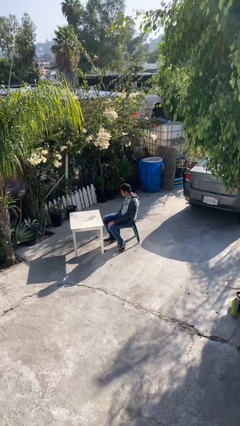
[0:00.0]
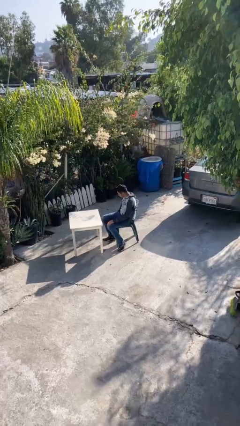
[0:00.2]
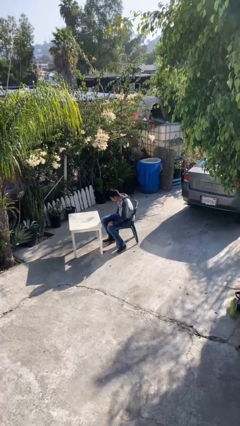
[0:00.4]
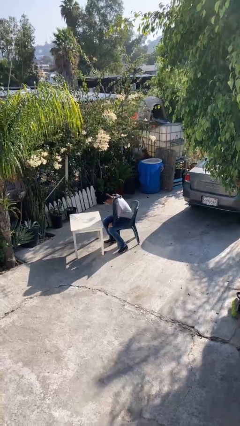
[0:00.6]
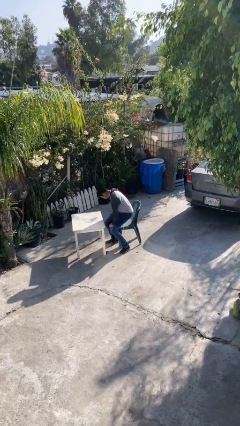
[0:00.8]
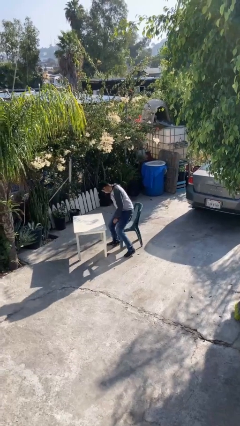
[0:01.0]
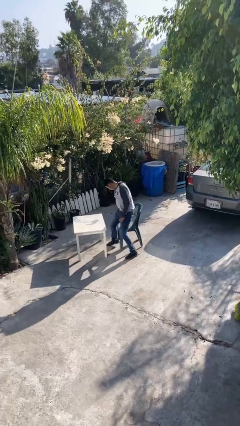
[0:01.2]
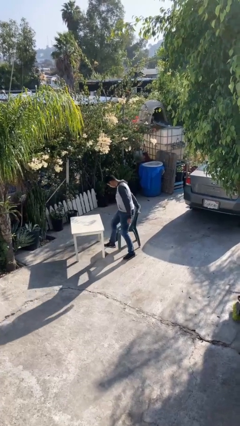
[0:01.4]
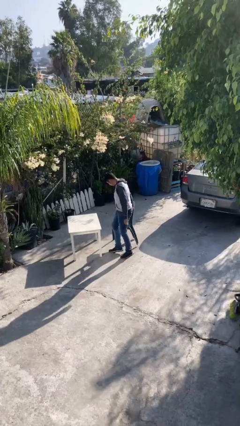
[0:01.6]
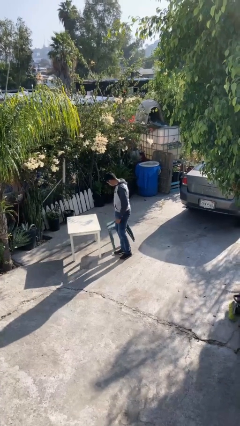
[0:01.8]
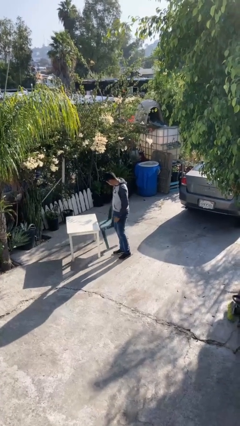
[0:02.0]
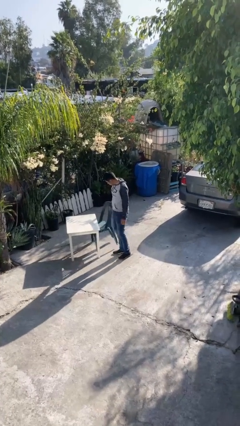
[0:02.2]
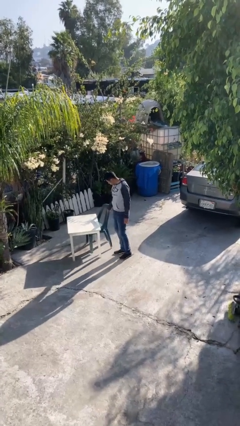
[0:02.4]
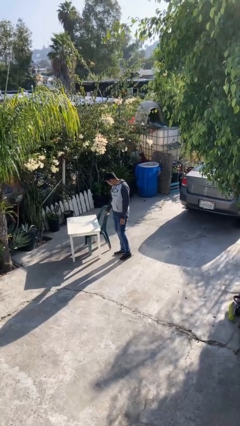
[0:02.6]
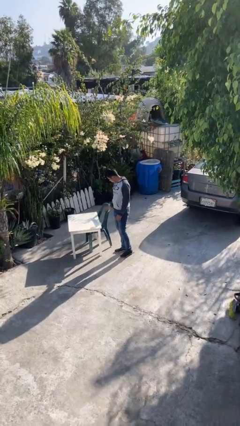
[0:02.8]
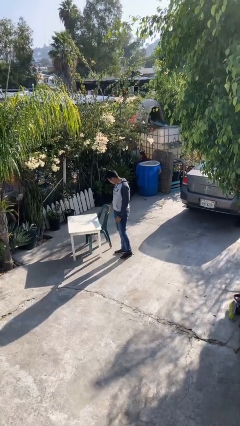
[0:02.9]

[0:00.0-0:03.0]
person stands up

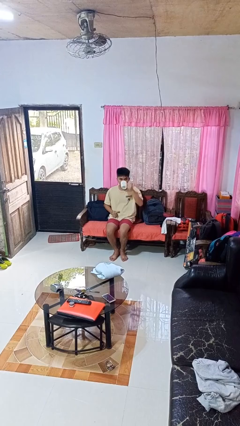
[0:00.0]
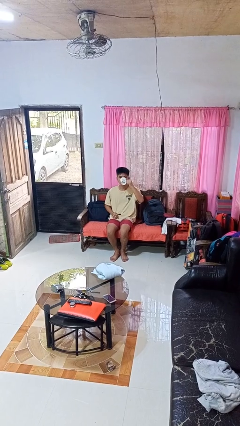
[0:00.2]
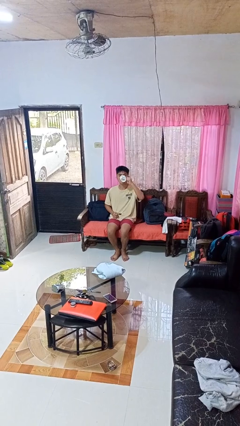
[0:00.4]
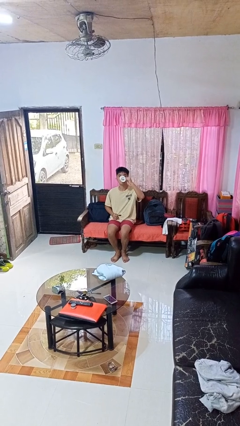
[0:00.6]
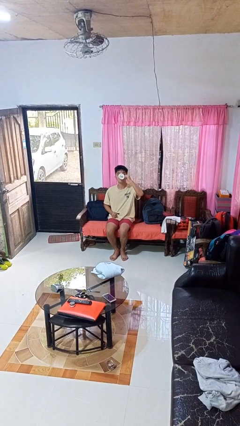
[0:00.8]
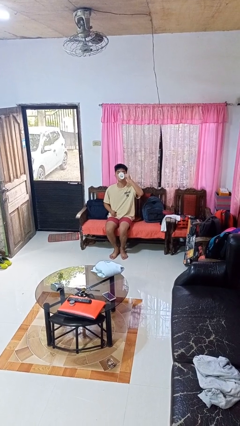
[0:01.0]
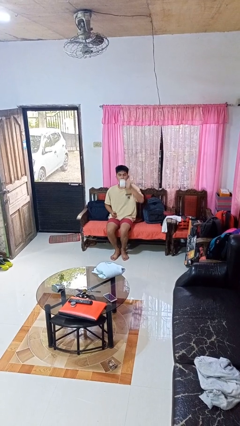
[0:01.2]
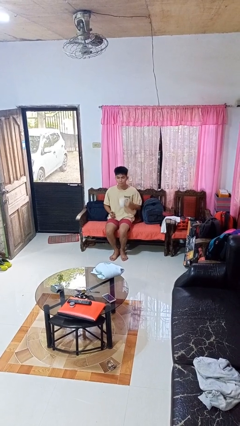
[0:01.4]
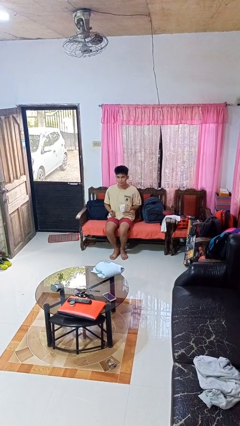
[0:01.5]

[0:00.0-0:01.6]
person drinks from mug

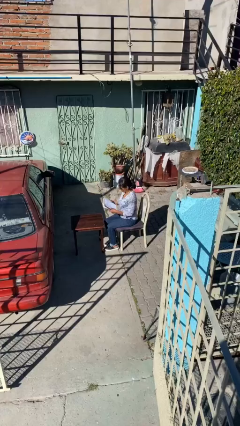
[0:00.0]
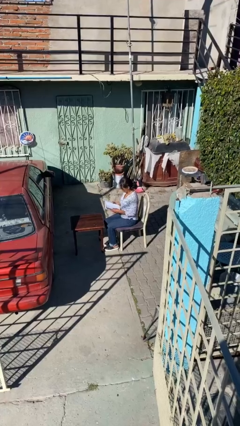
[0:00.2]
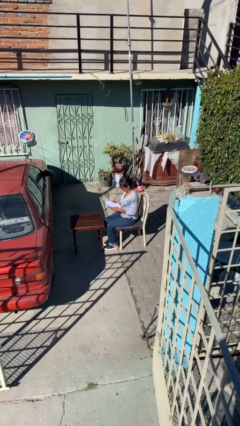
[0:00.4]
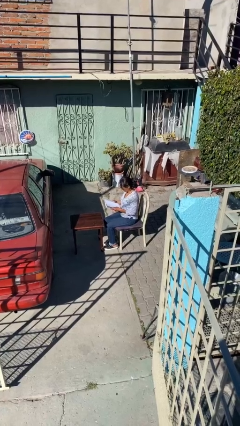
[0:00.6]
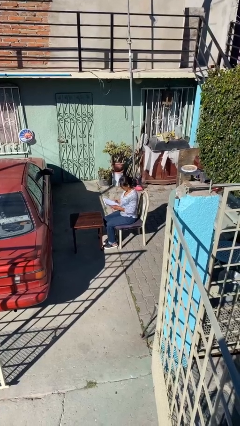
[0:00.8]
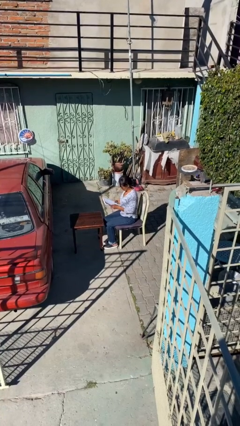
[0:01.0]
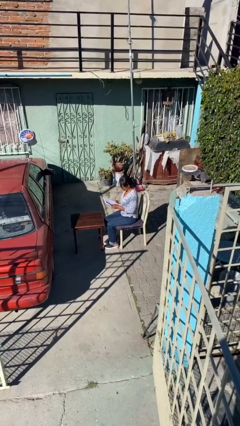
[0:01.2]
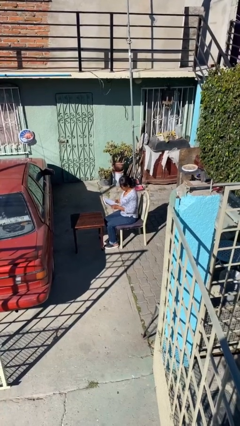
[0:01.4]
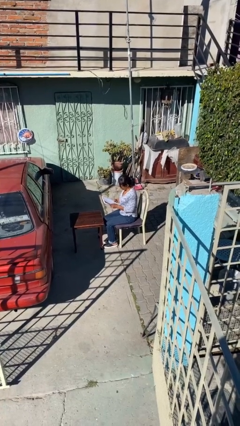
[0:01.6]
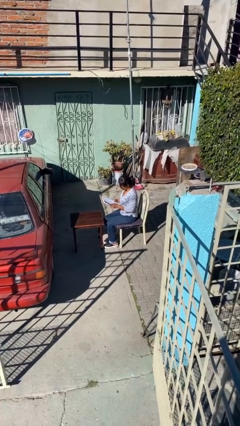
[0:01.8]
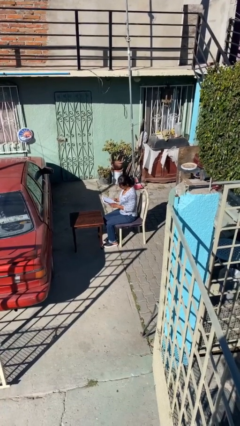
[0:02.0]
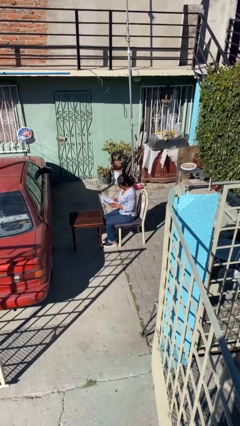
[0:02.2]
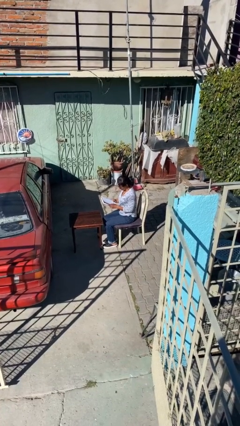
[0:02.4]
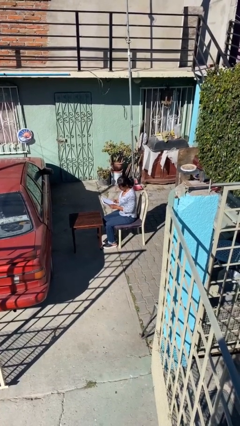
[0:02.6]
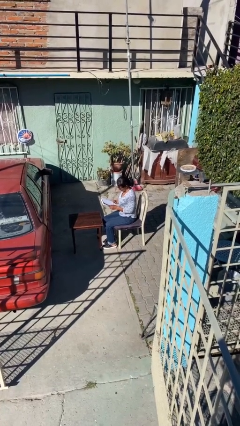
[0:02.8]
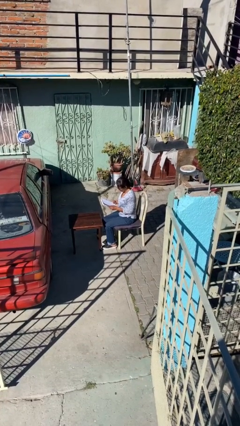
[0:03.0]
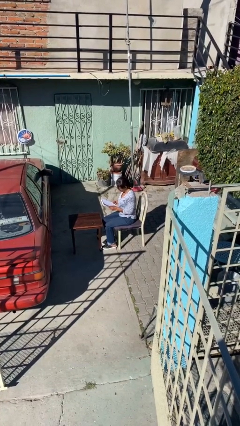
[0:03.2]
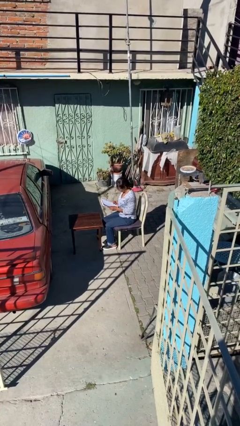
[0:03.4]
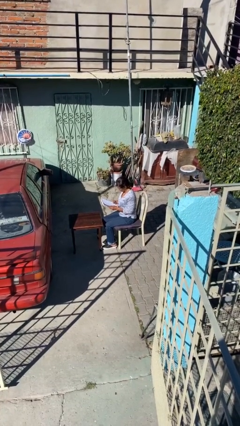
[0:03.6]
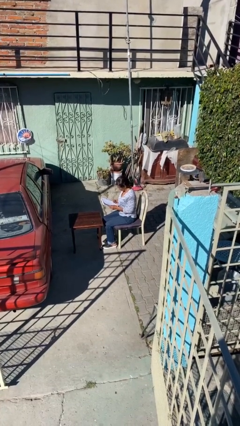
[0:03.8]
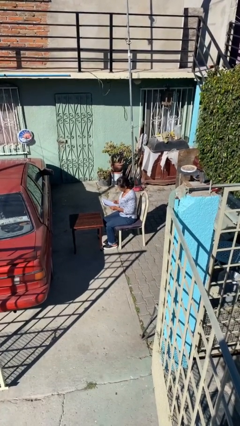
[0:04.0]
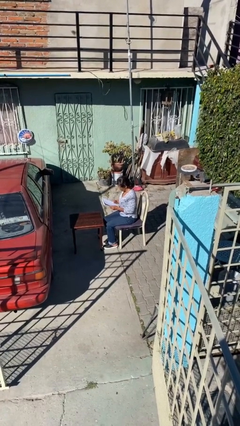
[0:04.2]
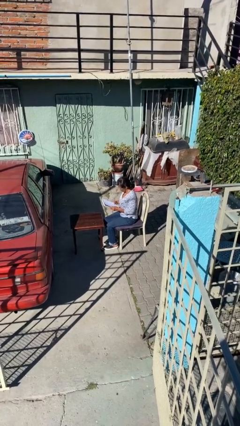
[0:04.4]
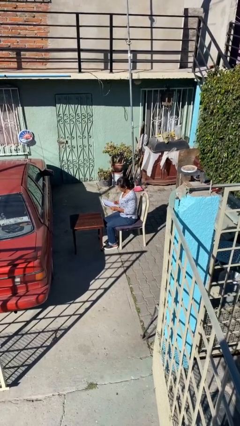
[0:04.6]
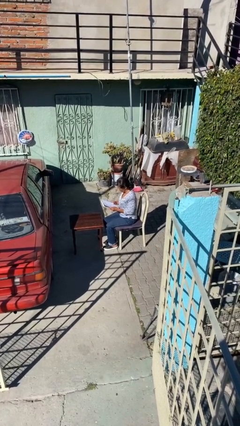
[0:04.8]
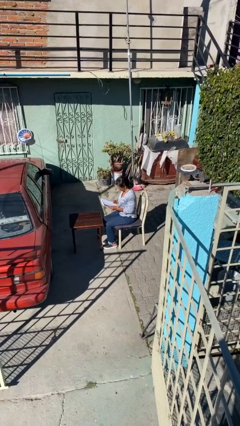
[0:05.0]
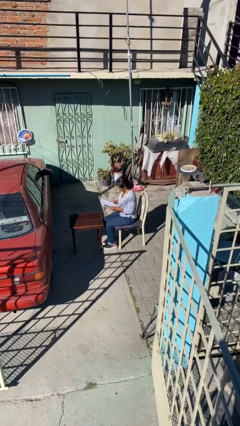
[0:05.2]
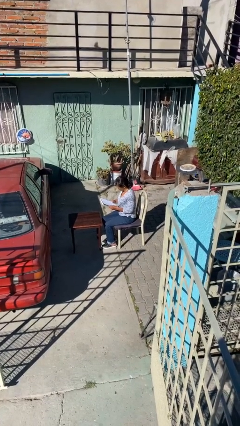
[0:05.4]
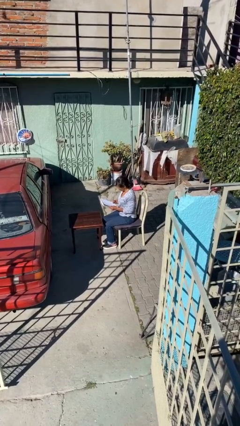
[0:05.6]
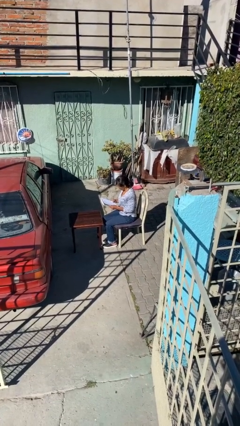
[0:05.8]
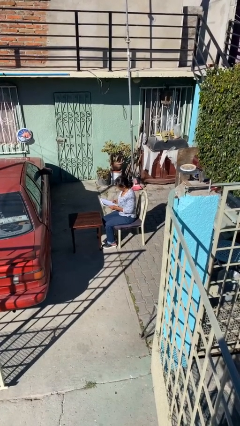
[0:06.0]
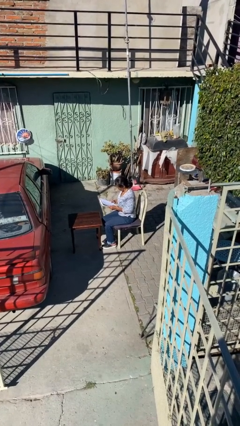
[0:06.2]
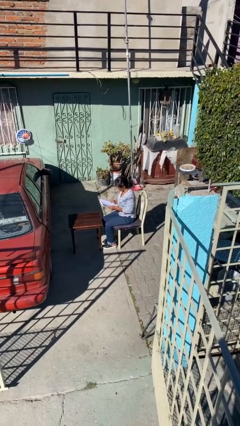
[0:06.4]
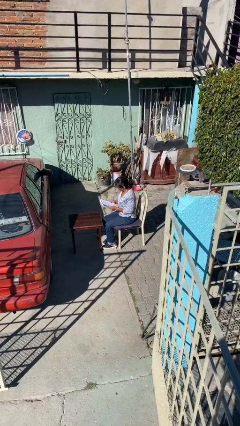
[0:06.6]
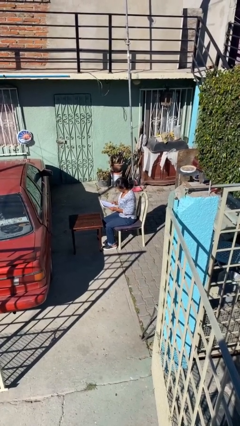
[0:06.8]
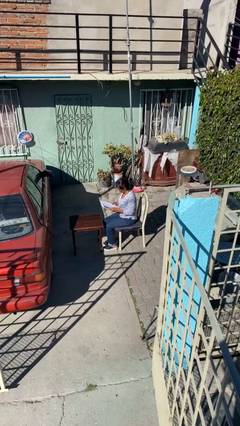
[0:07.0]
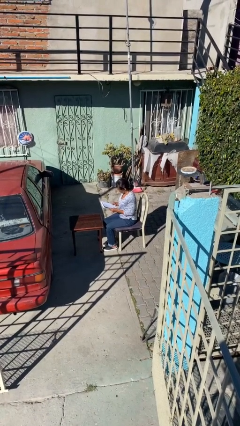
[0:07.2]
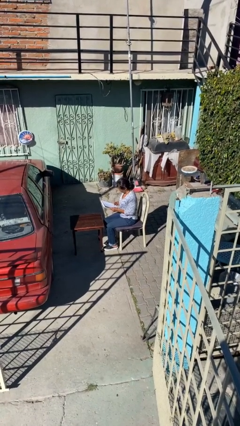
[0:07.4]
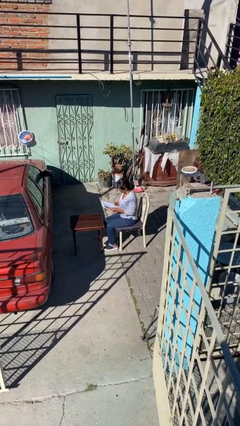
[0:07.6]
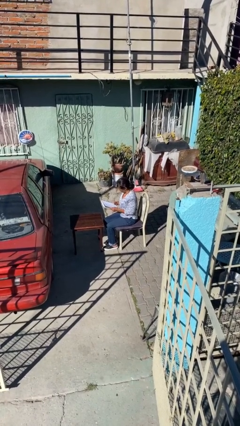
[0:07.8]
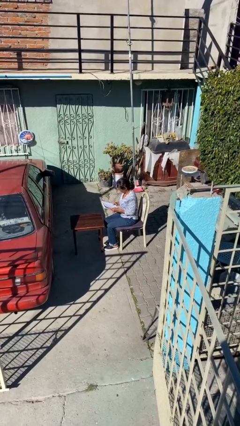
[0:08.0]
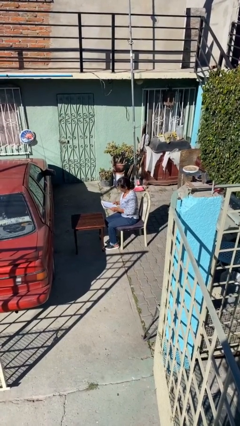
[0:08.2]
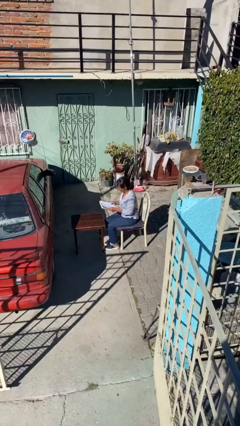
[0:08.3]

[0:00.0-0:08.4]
person reads document

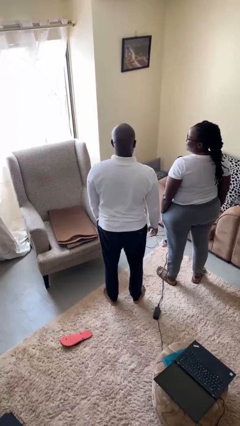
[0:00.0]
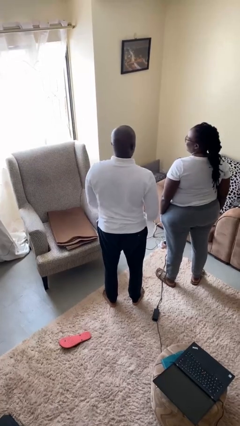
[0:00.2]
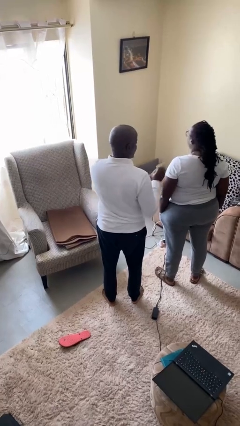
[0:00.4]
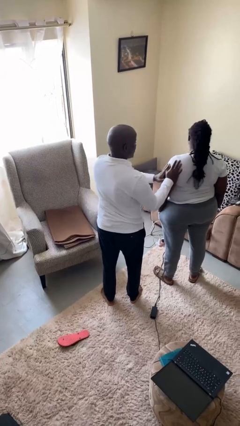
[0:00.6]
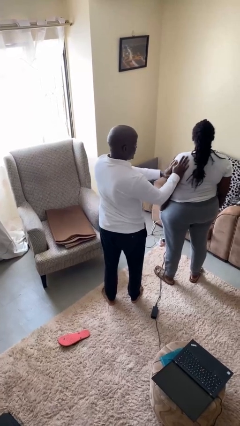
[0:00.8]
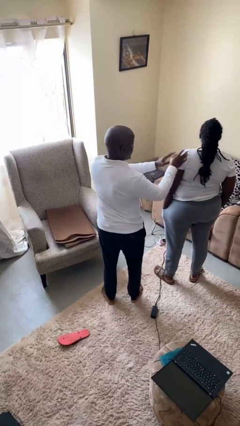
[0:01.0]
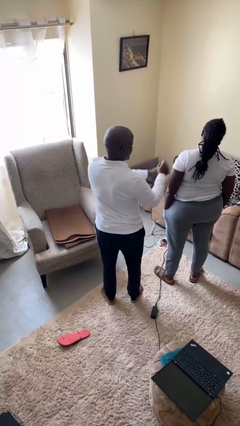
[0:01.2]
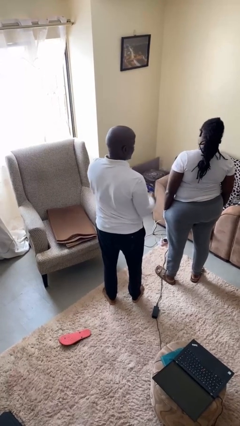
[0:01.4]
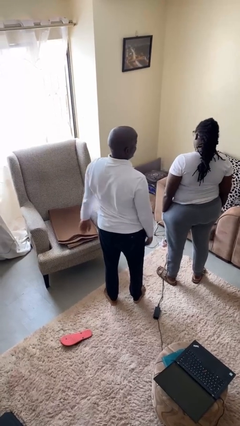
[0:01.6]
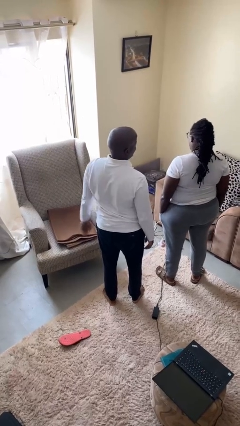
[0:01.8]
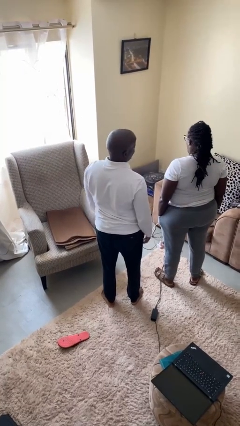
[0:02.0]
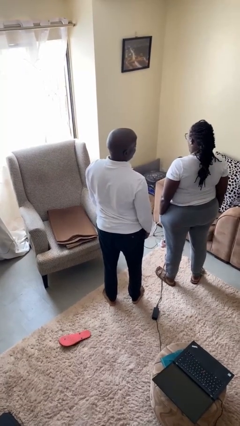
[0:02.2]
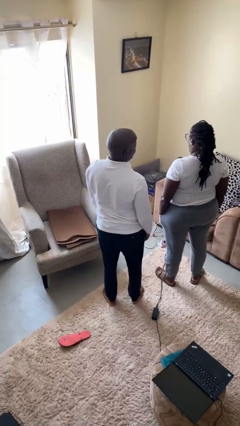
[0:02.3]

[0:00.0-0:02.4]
person shoves person

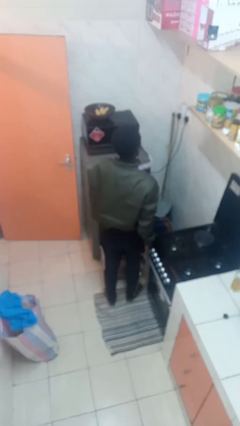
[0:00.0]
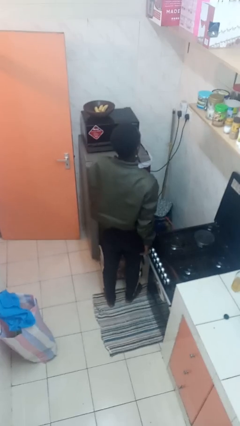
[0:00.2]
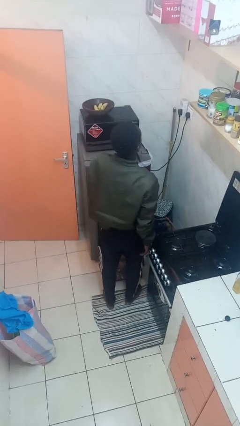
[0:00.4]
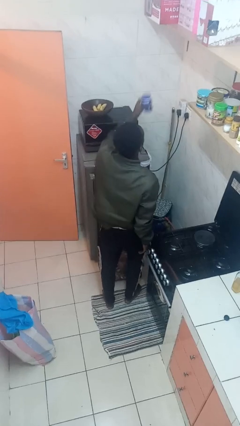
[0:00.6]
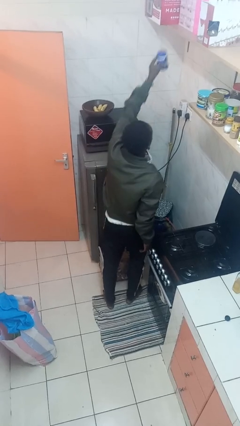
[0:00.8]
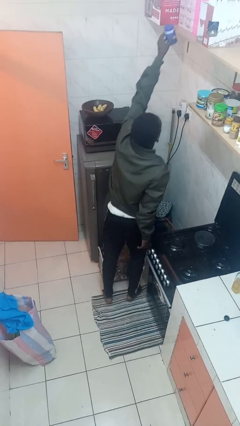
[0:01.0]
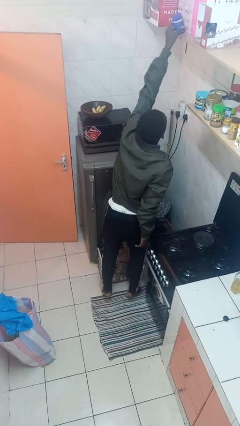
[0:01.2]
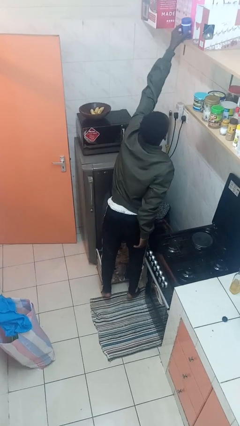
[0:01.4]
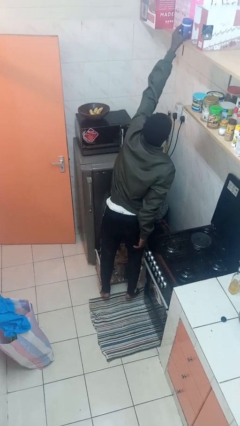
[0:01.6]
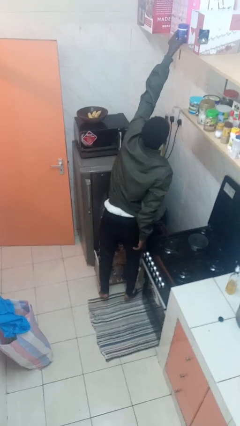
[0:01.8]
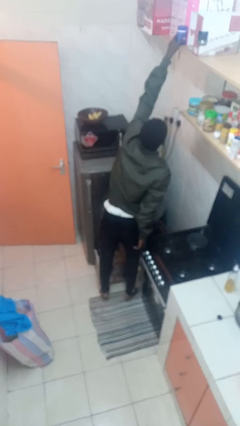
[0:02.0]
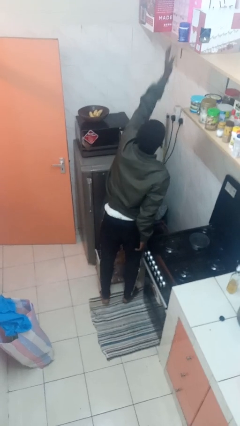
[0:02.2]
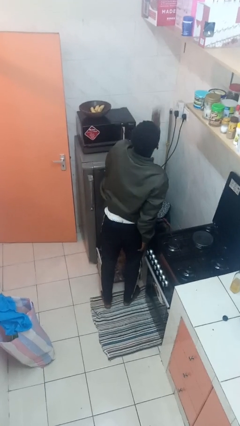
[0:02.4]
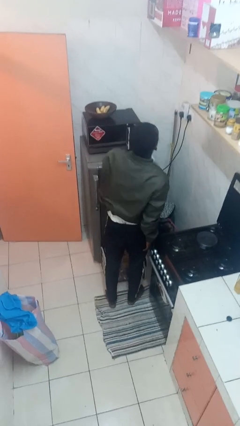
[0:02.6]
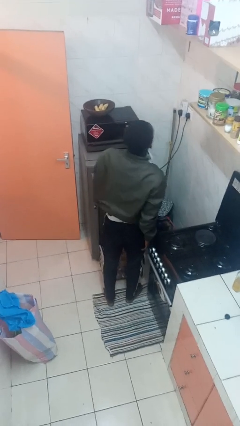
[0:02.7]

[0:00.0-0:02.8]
person puts down object on shelf
